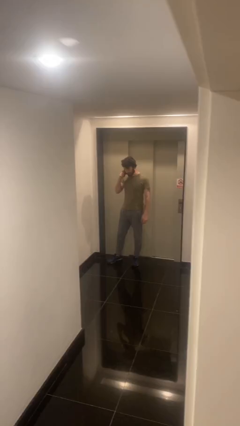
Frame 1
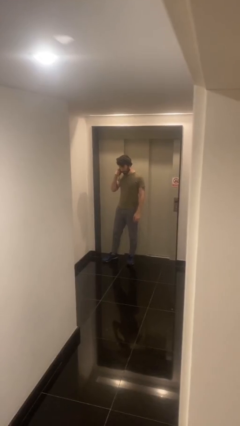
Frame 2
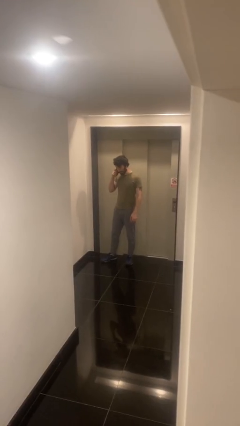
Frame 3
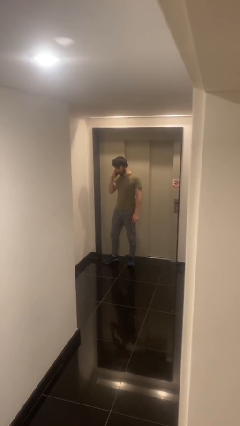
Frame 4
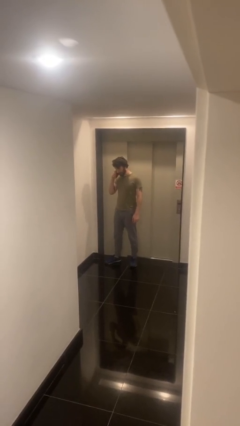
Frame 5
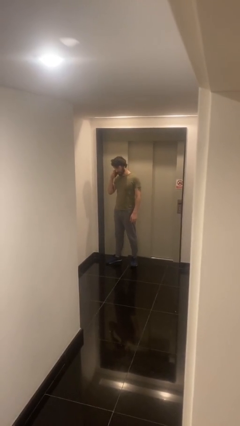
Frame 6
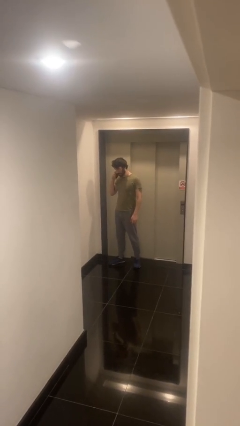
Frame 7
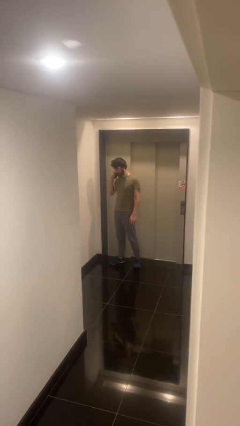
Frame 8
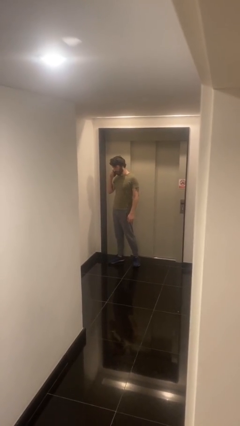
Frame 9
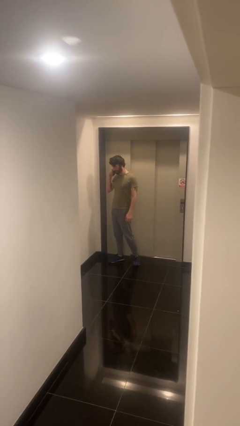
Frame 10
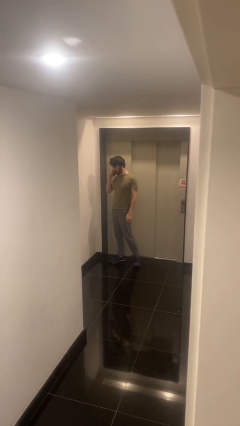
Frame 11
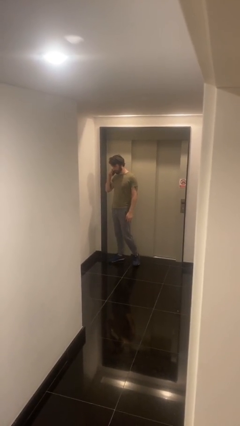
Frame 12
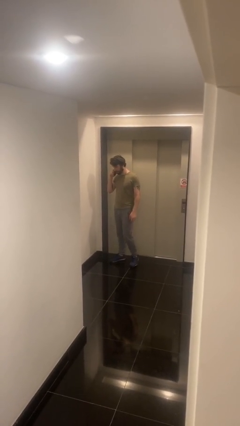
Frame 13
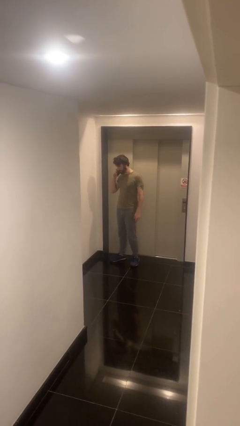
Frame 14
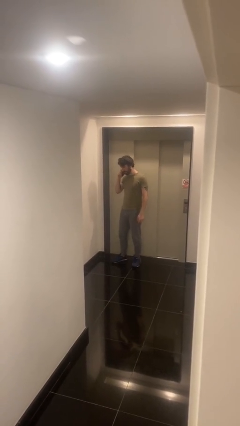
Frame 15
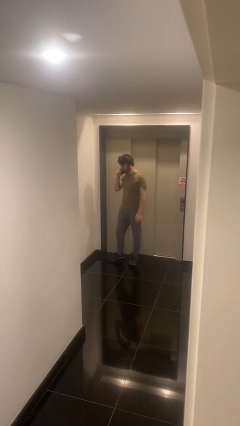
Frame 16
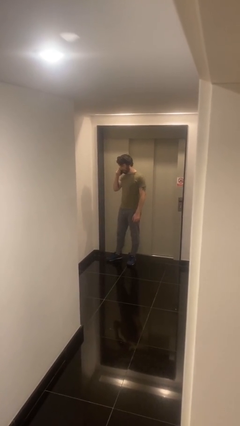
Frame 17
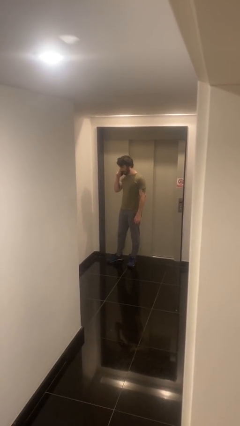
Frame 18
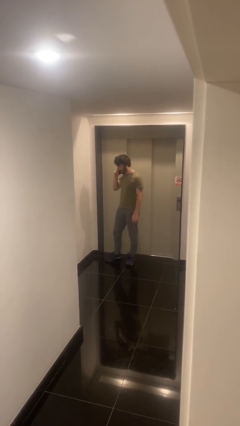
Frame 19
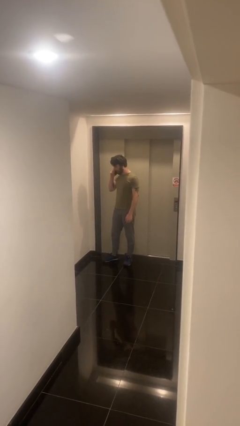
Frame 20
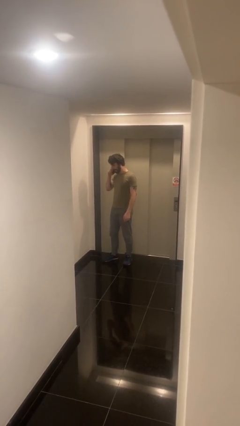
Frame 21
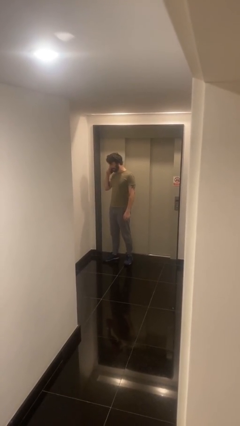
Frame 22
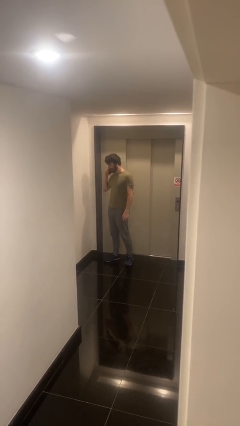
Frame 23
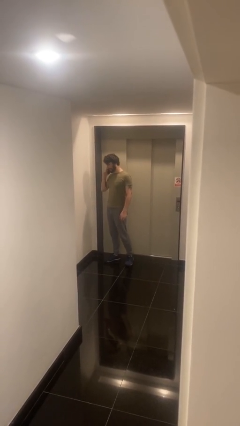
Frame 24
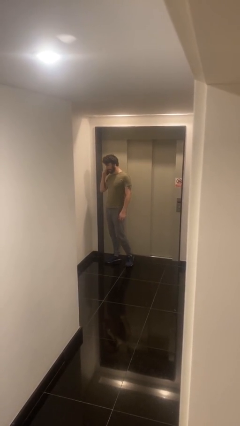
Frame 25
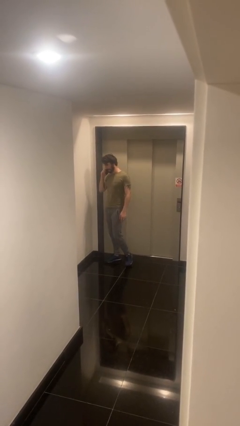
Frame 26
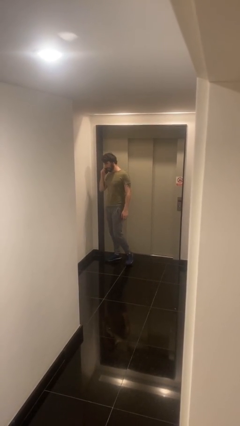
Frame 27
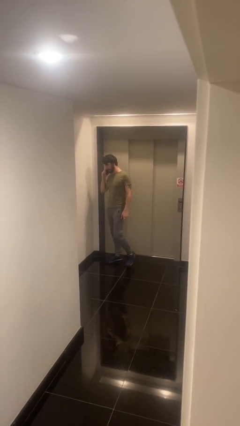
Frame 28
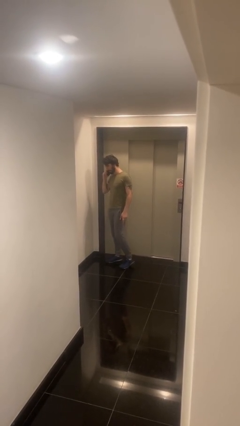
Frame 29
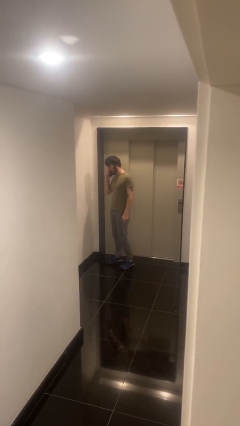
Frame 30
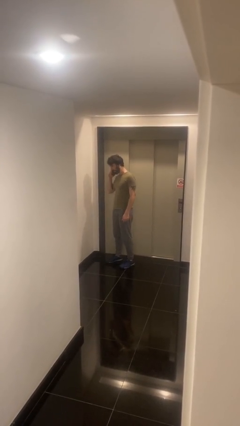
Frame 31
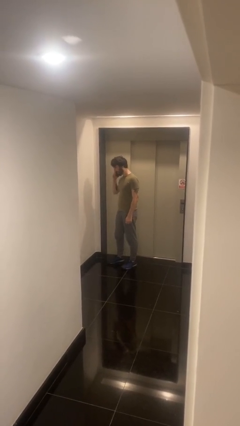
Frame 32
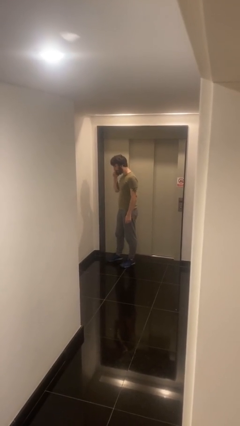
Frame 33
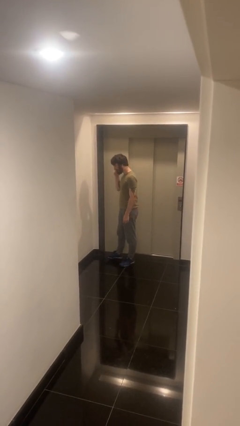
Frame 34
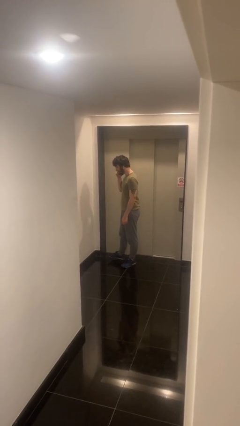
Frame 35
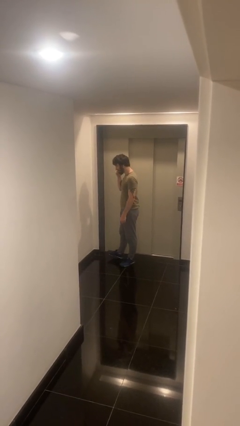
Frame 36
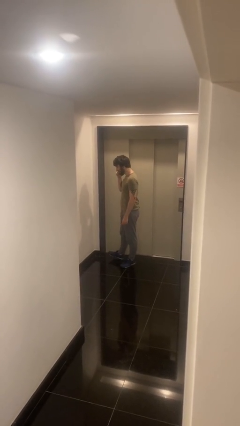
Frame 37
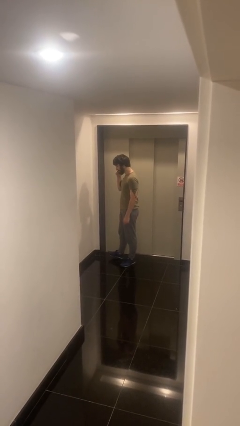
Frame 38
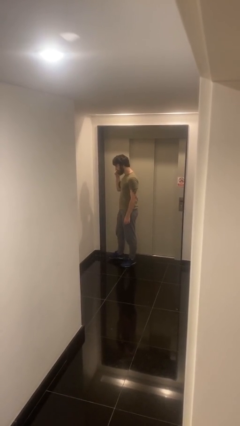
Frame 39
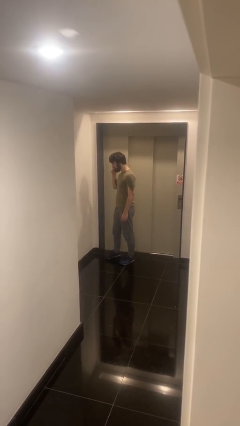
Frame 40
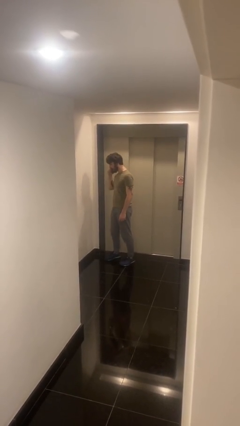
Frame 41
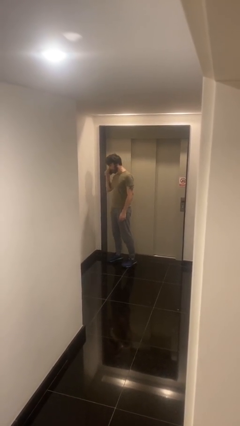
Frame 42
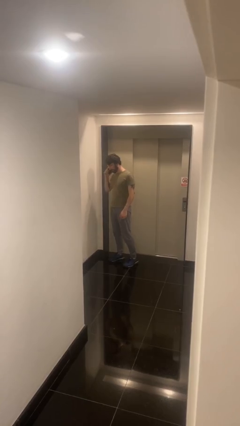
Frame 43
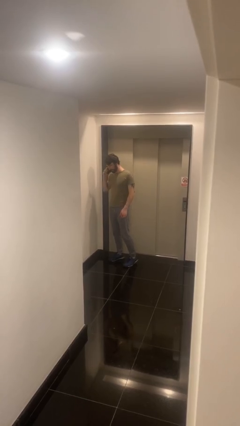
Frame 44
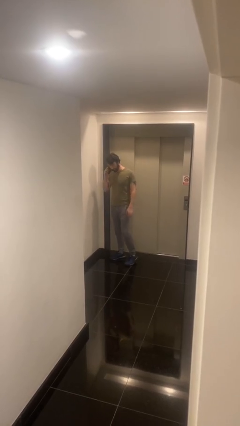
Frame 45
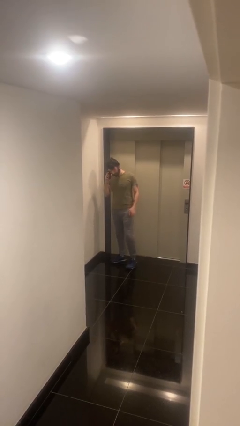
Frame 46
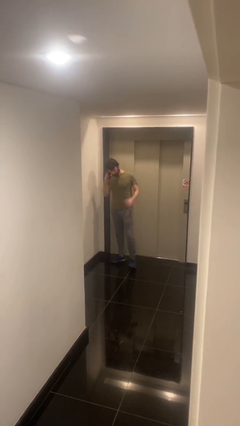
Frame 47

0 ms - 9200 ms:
person talks on phone

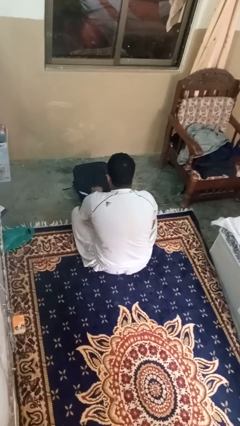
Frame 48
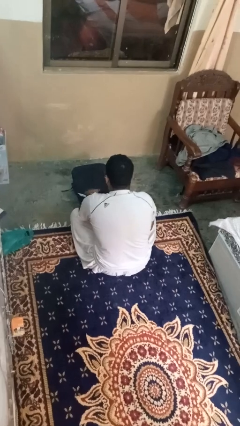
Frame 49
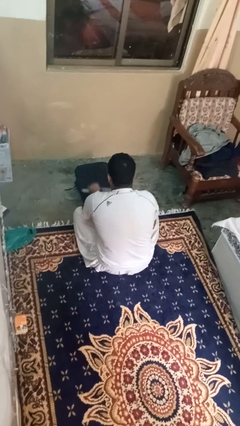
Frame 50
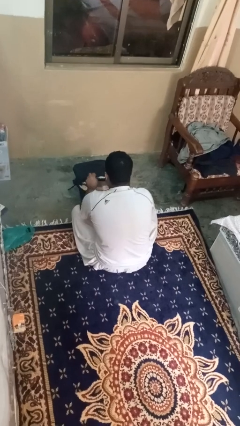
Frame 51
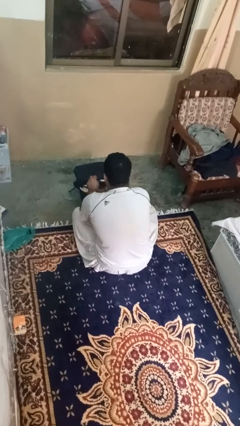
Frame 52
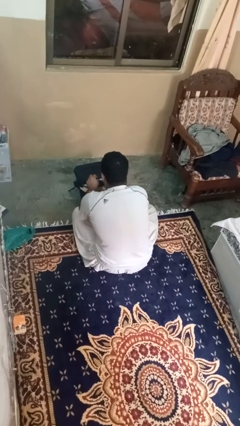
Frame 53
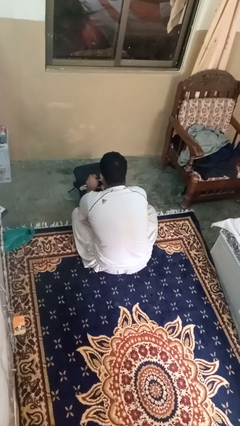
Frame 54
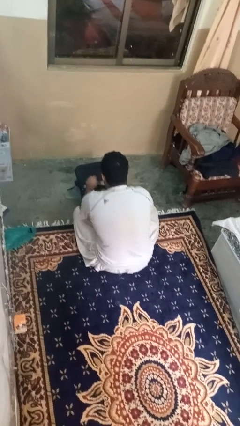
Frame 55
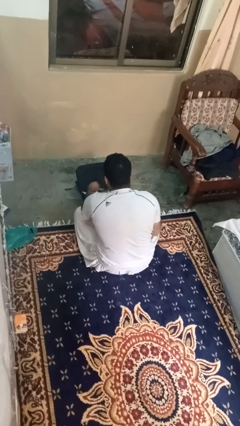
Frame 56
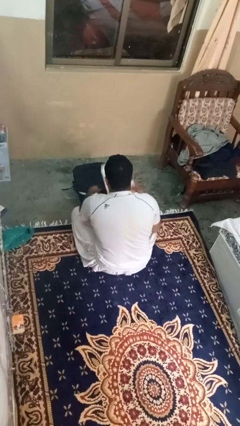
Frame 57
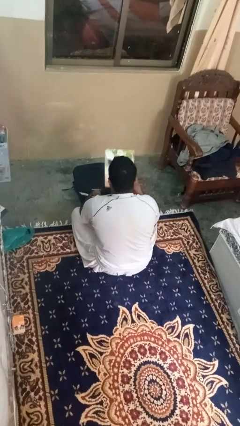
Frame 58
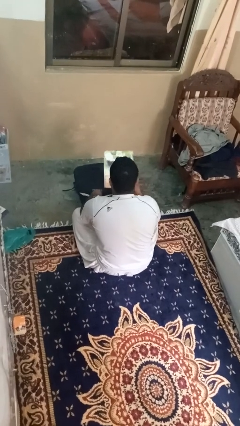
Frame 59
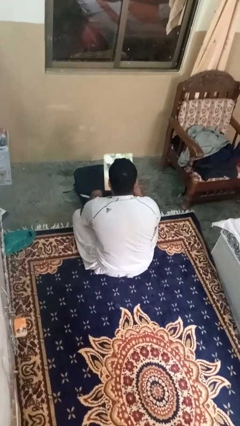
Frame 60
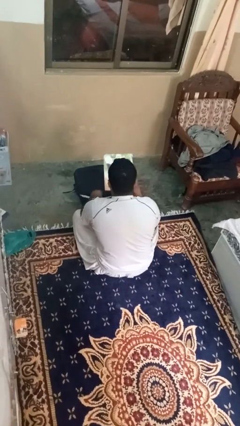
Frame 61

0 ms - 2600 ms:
person takes object from bag

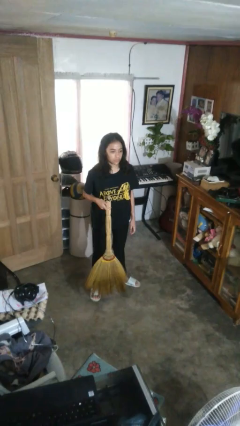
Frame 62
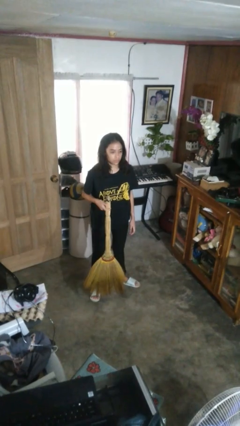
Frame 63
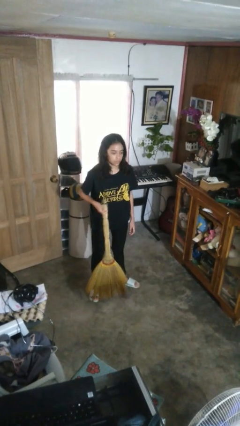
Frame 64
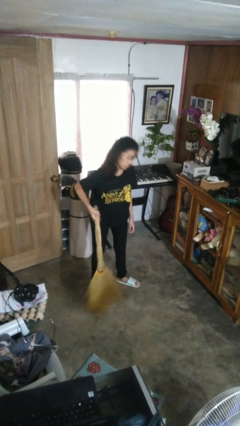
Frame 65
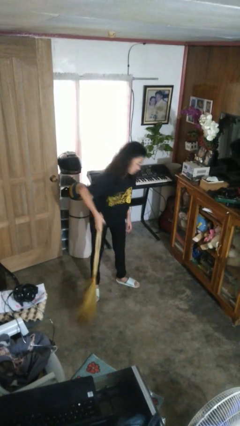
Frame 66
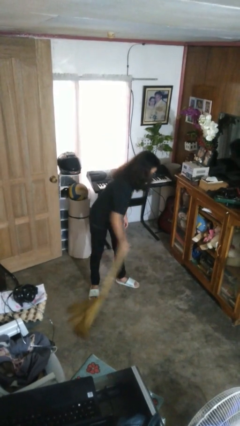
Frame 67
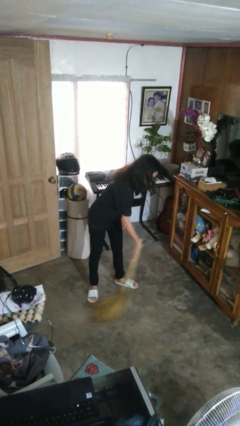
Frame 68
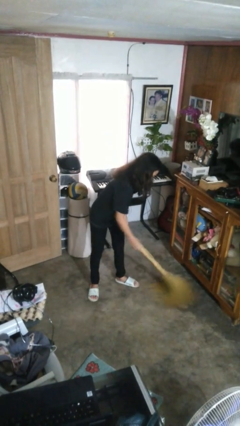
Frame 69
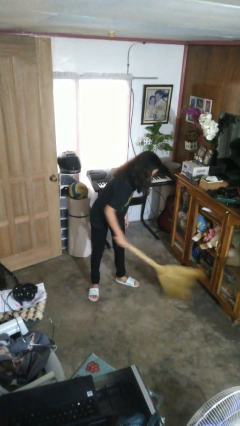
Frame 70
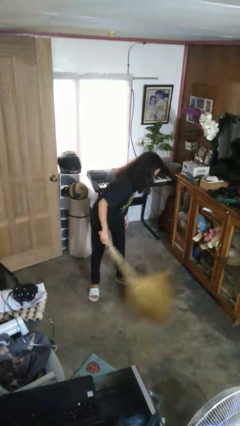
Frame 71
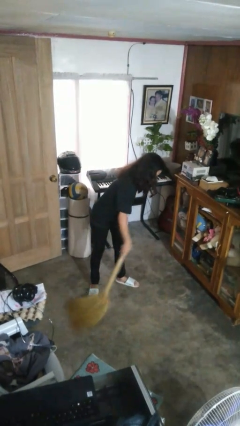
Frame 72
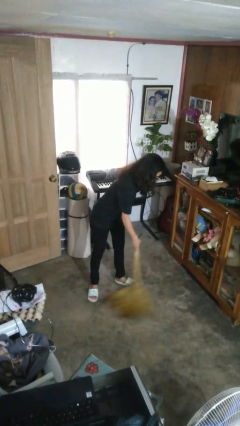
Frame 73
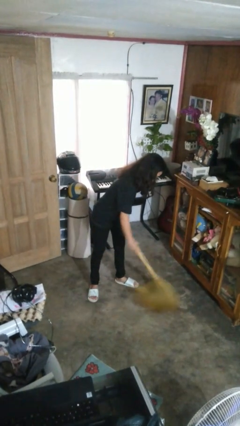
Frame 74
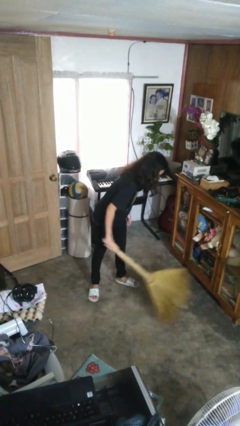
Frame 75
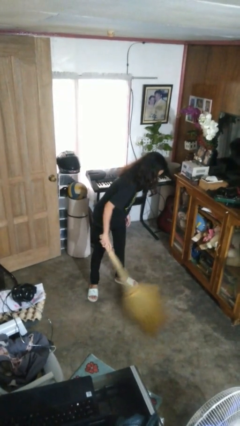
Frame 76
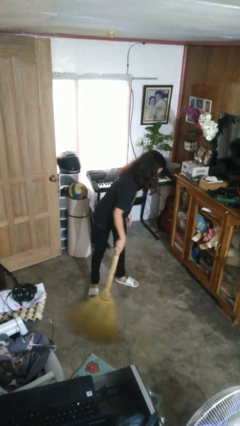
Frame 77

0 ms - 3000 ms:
person sweeps floor

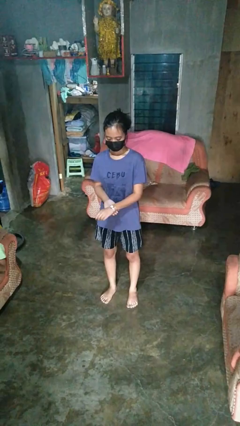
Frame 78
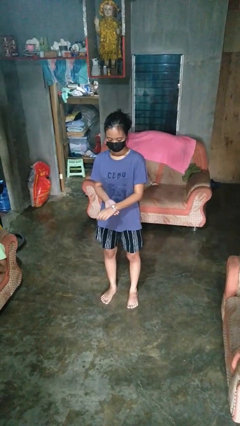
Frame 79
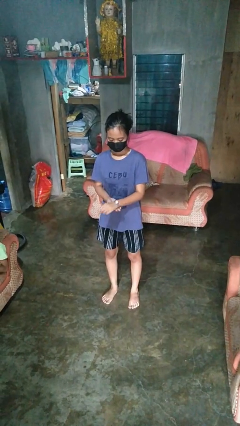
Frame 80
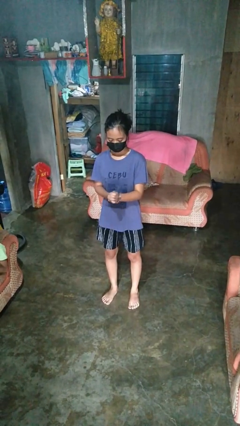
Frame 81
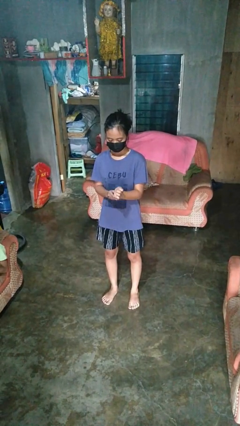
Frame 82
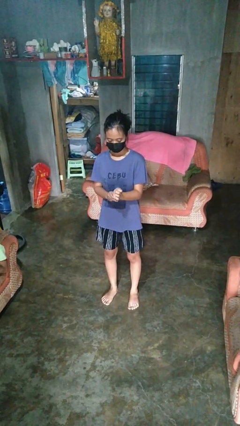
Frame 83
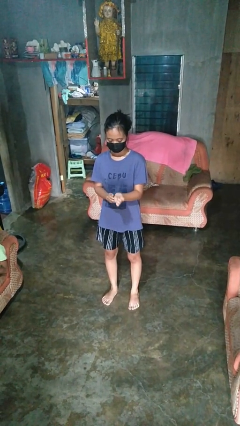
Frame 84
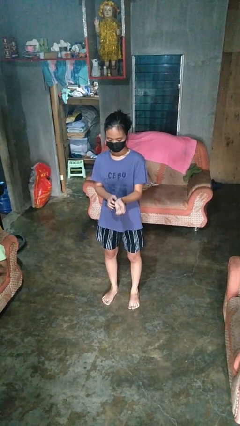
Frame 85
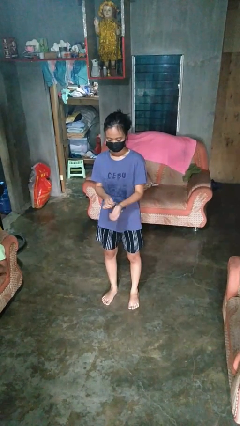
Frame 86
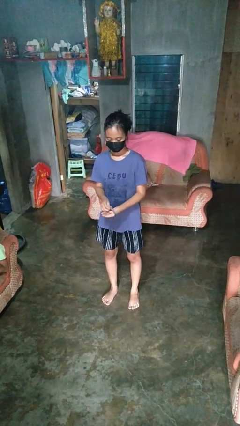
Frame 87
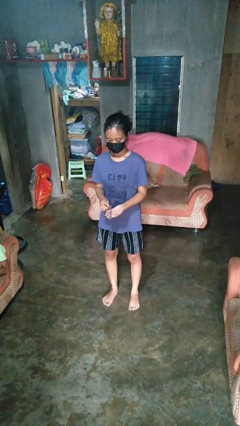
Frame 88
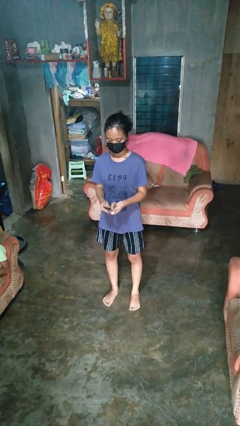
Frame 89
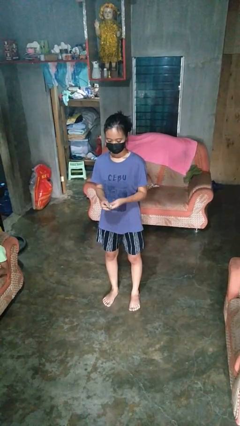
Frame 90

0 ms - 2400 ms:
person takes off wristwatch

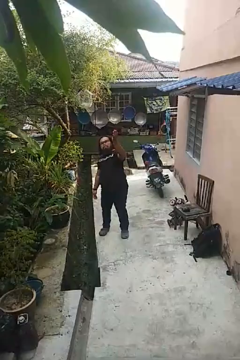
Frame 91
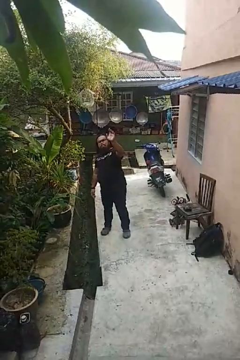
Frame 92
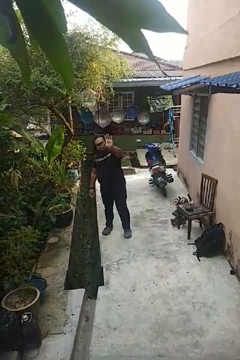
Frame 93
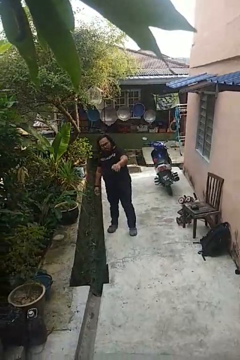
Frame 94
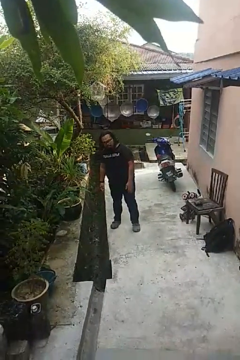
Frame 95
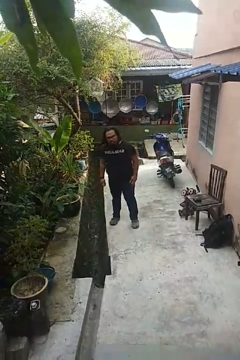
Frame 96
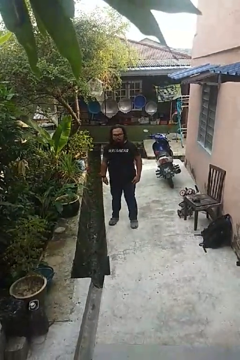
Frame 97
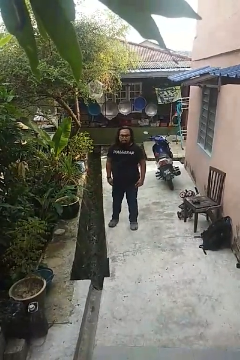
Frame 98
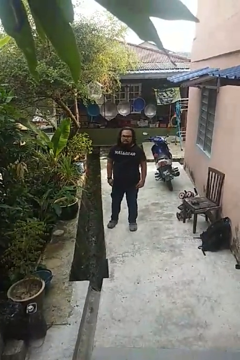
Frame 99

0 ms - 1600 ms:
person gestures swipe down
